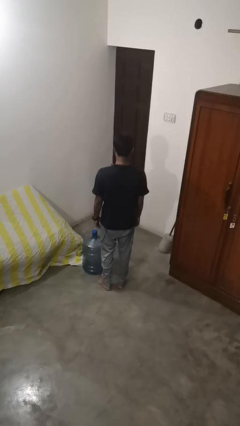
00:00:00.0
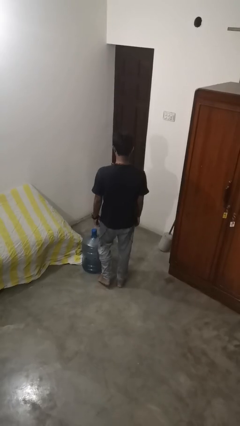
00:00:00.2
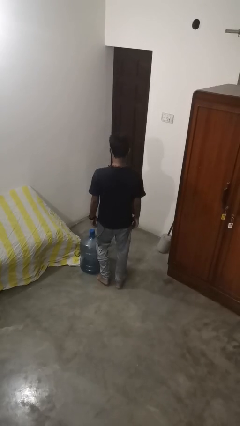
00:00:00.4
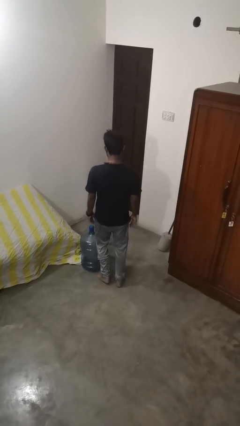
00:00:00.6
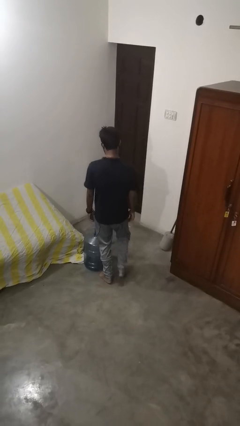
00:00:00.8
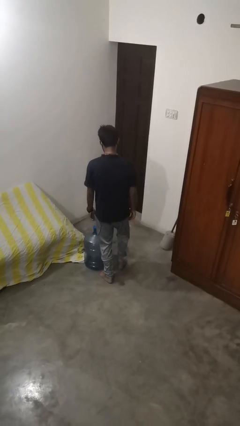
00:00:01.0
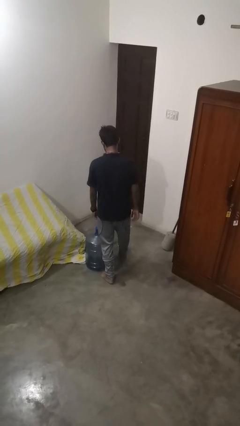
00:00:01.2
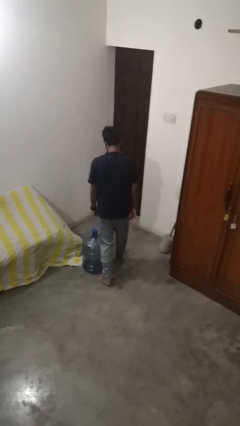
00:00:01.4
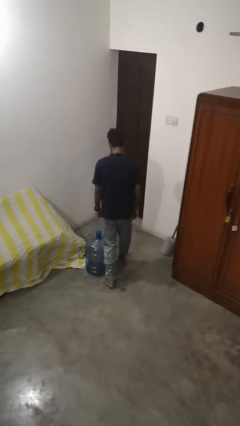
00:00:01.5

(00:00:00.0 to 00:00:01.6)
person trips on object on floor

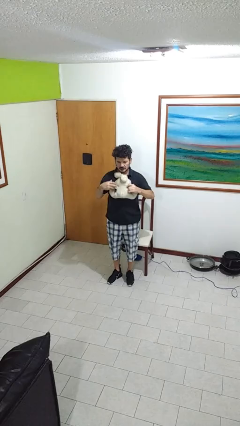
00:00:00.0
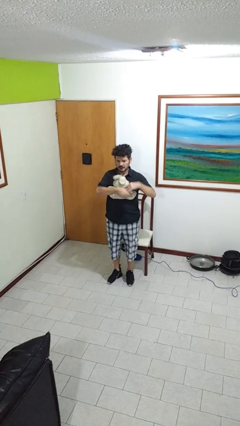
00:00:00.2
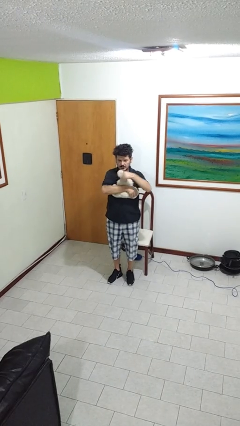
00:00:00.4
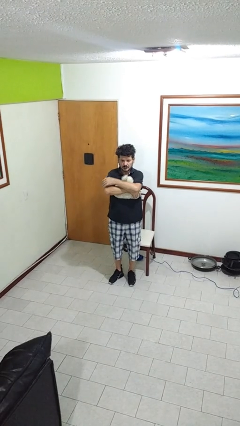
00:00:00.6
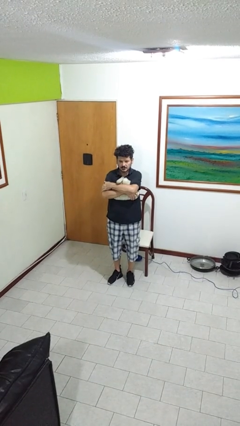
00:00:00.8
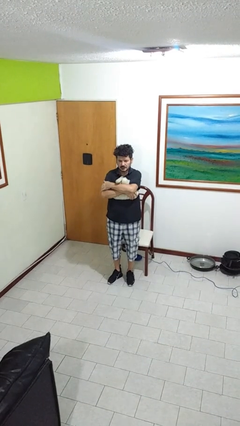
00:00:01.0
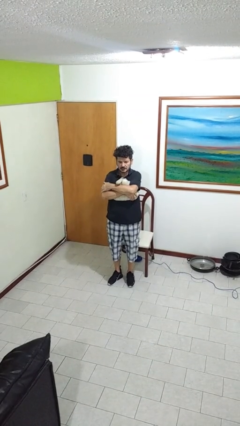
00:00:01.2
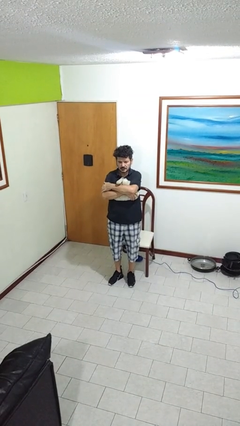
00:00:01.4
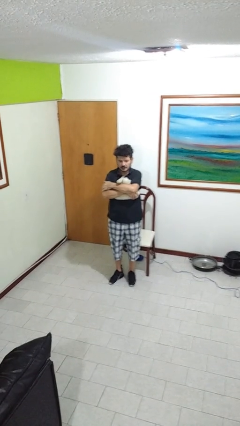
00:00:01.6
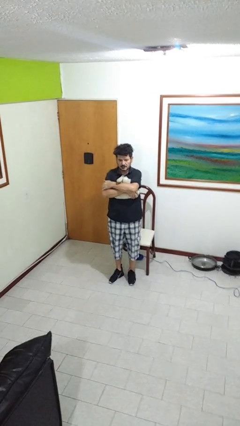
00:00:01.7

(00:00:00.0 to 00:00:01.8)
person hugs stuffed animal

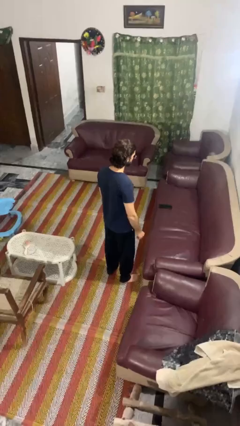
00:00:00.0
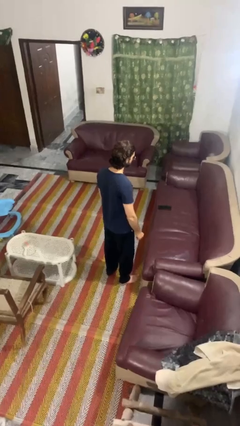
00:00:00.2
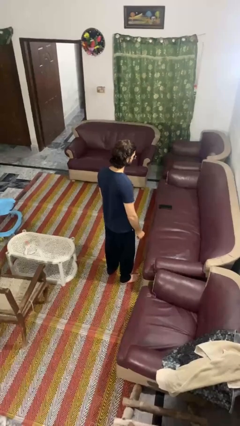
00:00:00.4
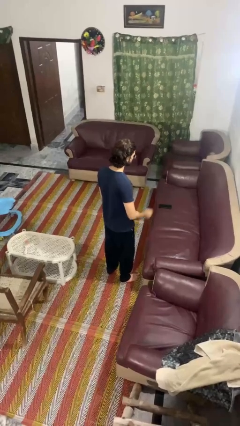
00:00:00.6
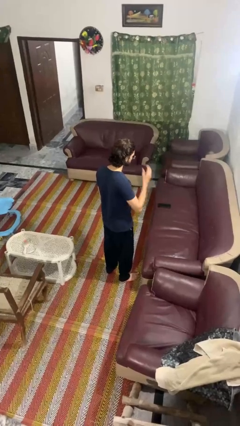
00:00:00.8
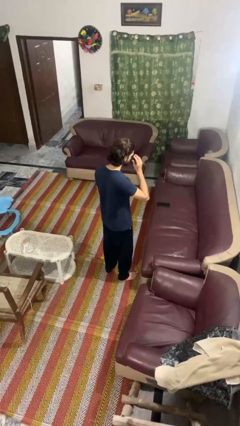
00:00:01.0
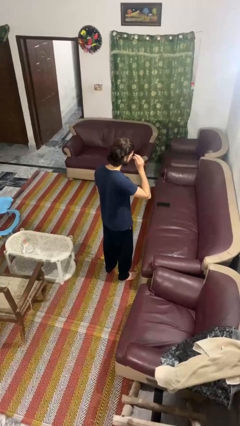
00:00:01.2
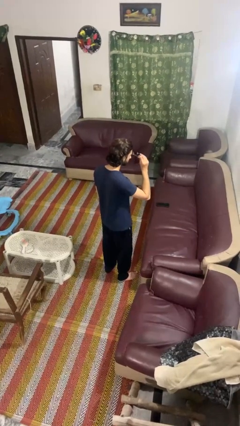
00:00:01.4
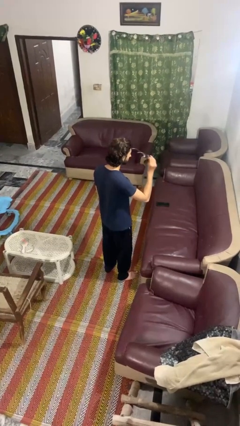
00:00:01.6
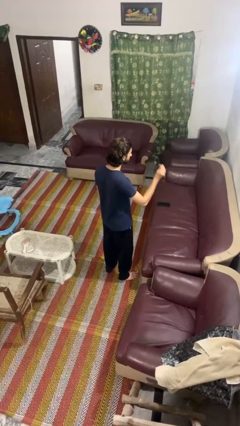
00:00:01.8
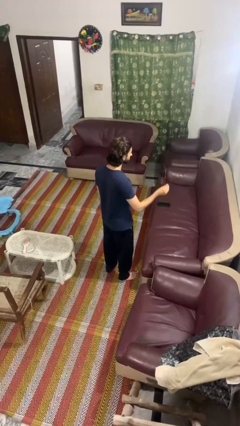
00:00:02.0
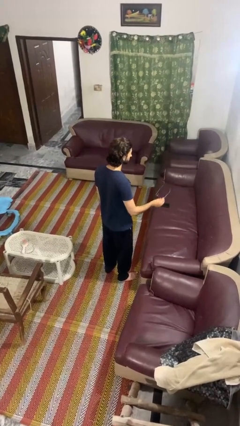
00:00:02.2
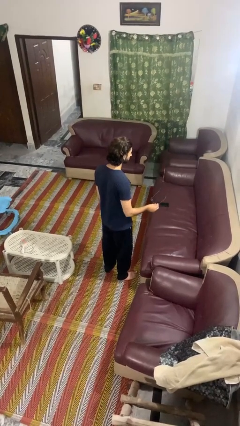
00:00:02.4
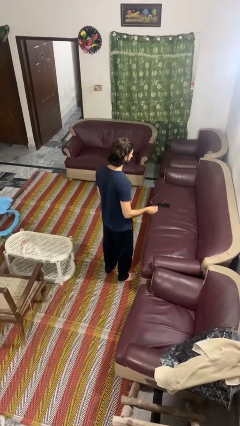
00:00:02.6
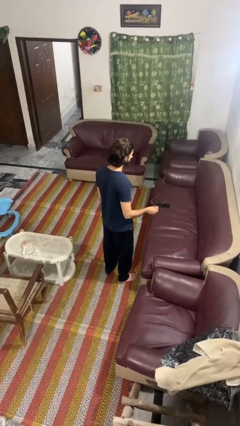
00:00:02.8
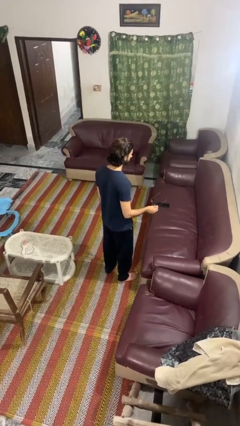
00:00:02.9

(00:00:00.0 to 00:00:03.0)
person takes off sunglasses

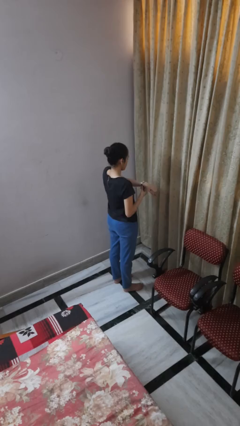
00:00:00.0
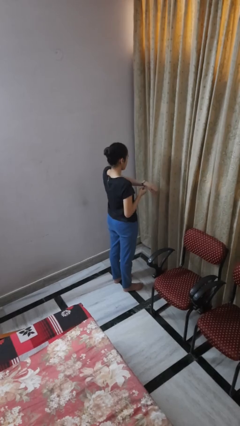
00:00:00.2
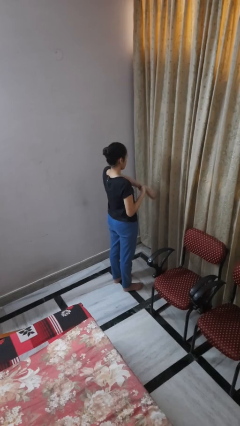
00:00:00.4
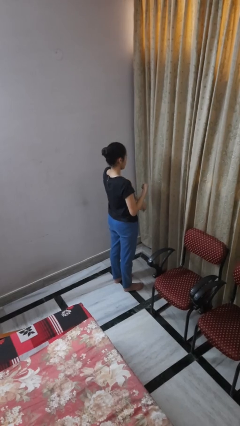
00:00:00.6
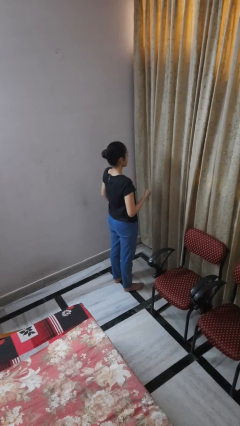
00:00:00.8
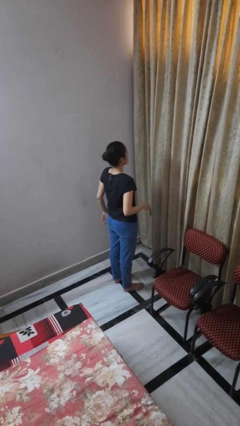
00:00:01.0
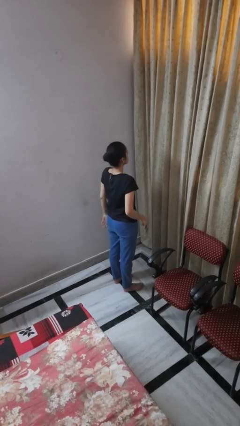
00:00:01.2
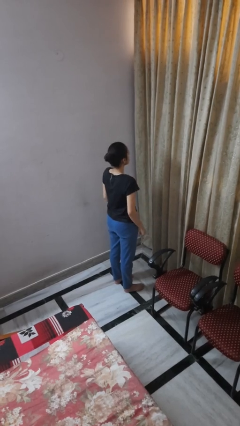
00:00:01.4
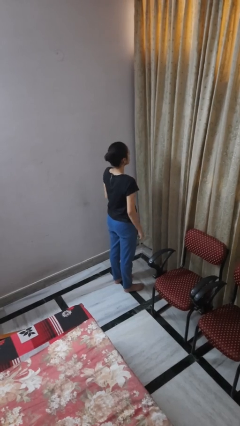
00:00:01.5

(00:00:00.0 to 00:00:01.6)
person takes off wristwatch

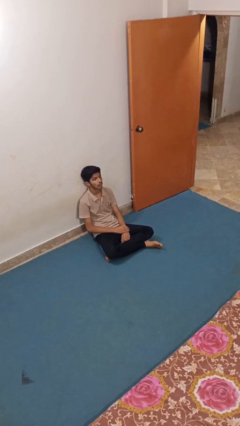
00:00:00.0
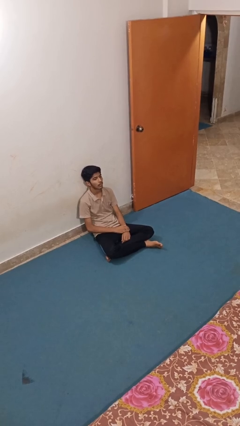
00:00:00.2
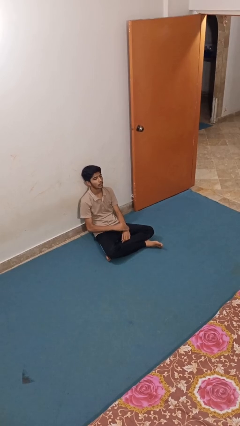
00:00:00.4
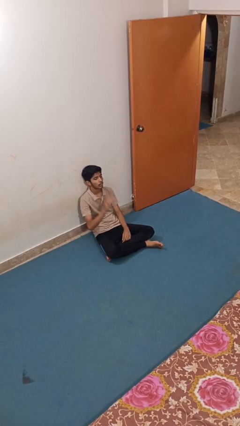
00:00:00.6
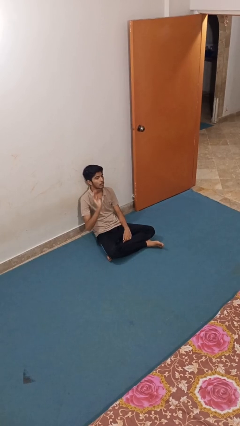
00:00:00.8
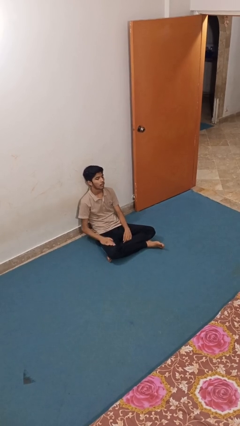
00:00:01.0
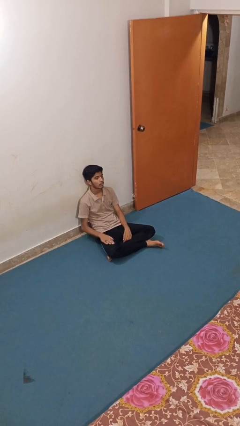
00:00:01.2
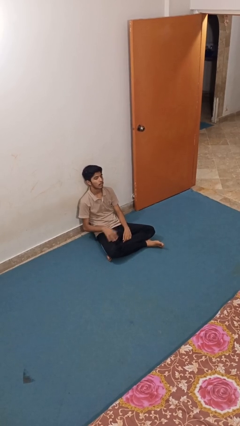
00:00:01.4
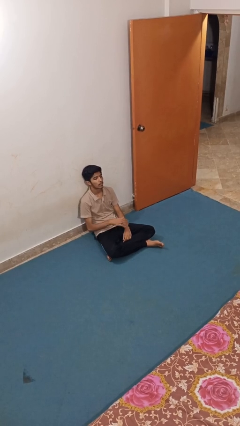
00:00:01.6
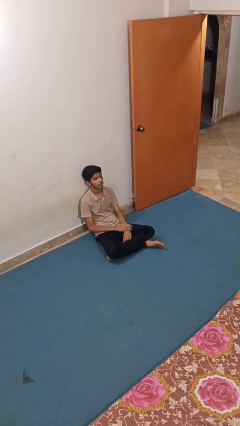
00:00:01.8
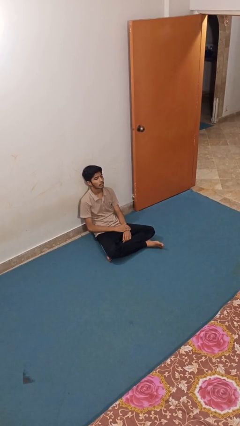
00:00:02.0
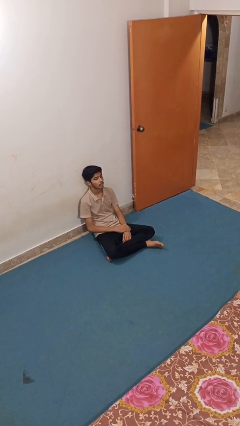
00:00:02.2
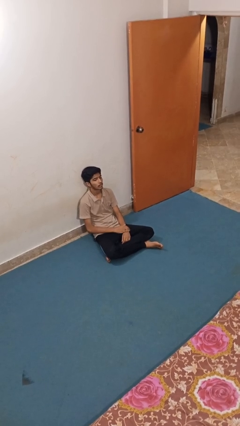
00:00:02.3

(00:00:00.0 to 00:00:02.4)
person slaps hands on thighs

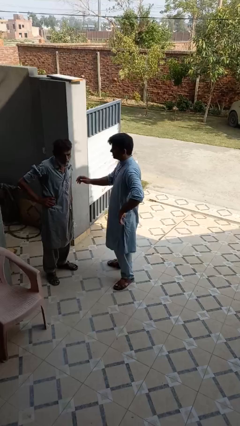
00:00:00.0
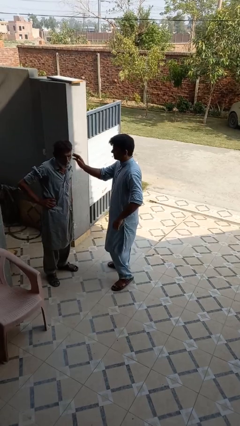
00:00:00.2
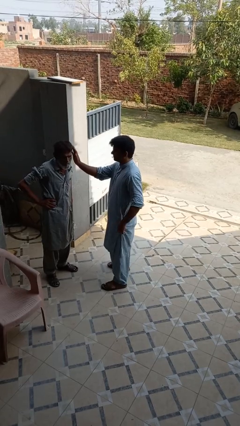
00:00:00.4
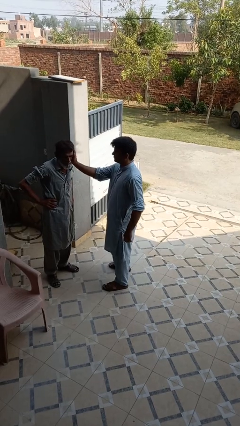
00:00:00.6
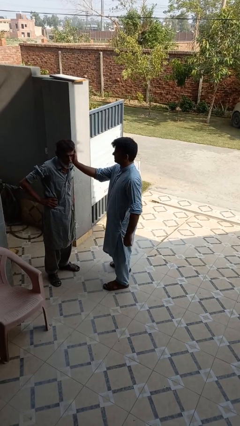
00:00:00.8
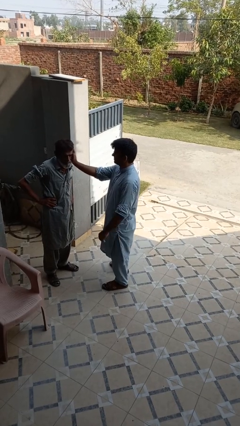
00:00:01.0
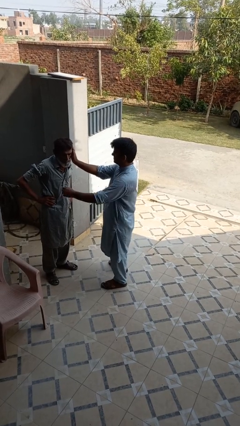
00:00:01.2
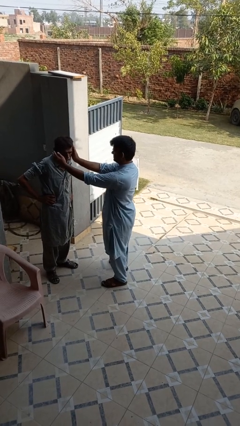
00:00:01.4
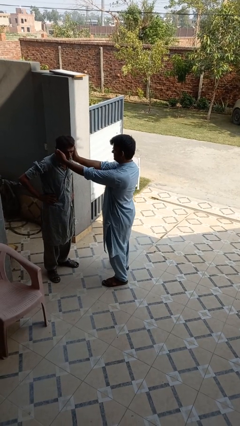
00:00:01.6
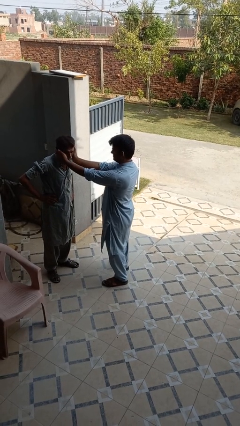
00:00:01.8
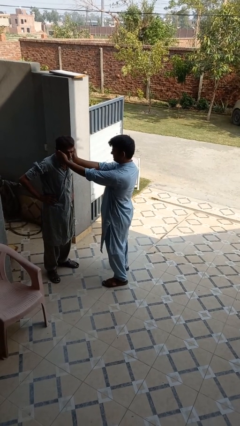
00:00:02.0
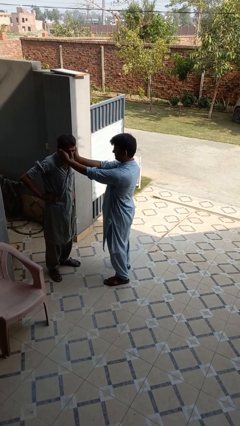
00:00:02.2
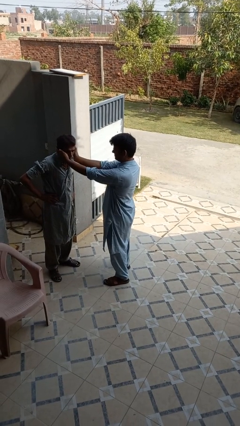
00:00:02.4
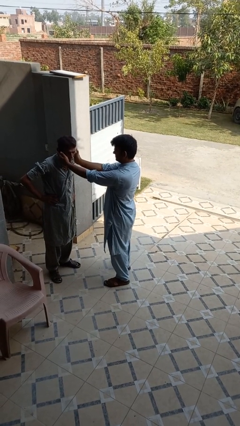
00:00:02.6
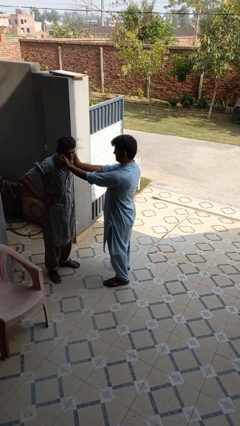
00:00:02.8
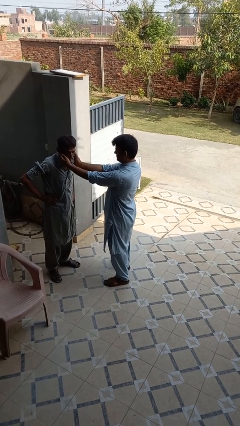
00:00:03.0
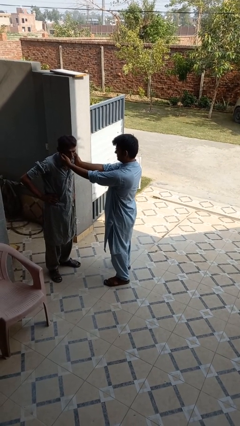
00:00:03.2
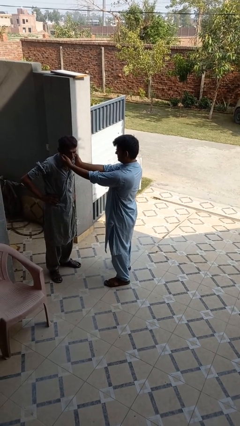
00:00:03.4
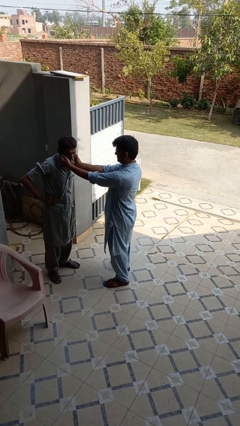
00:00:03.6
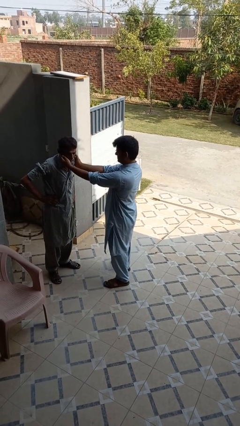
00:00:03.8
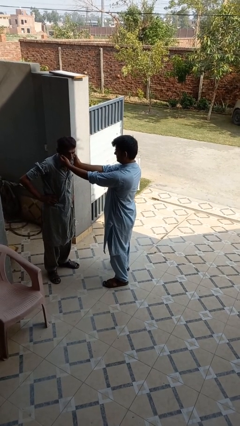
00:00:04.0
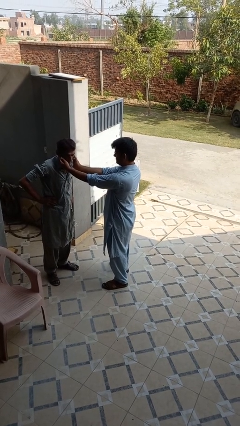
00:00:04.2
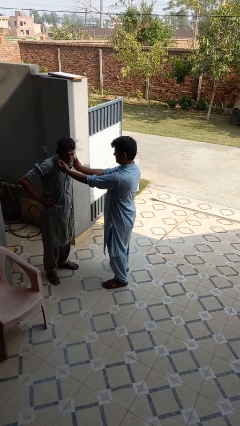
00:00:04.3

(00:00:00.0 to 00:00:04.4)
person touches face of person

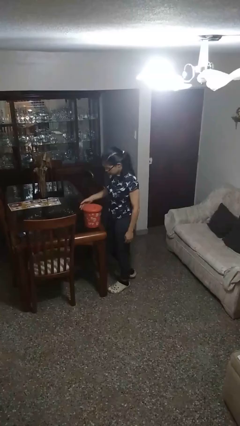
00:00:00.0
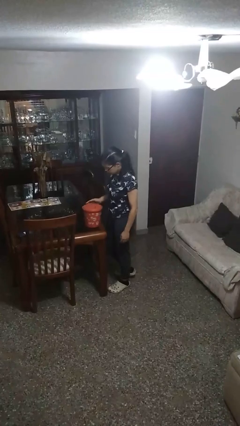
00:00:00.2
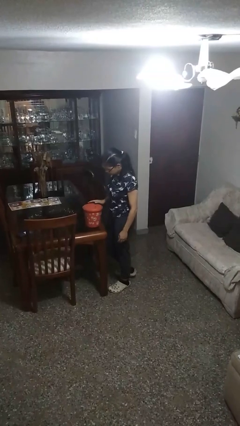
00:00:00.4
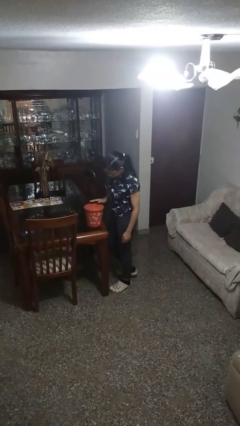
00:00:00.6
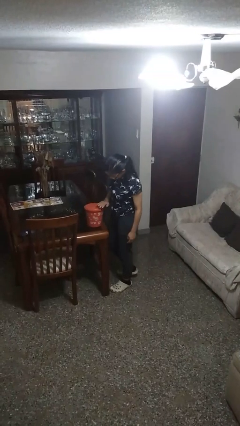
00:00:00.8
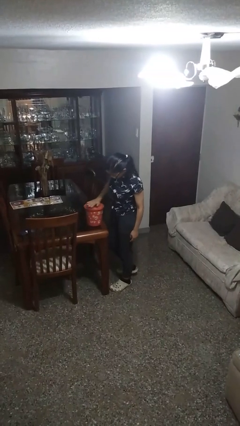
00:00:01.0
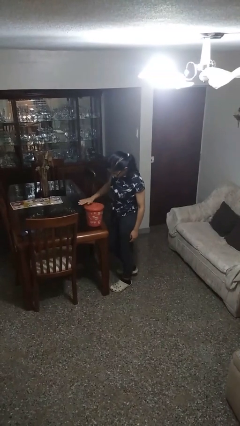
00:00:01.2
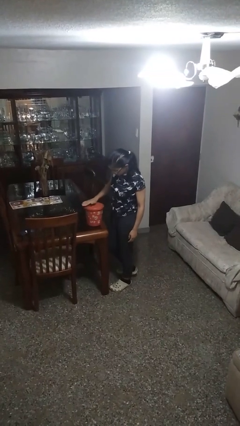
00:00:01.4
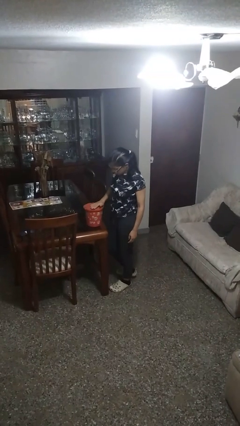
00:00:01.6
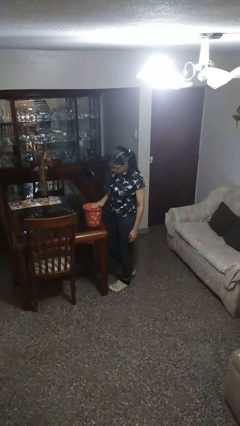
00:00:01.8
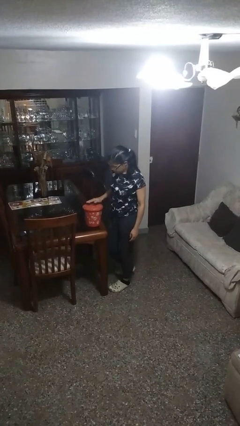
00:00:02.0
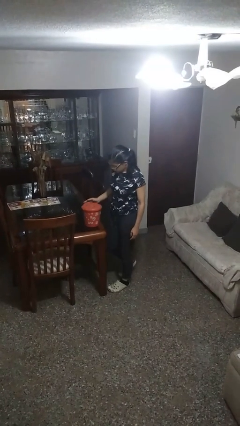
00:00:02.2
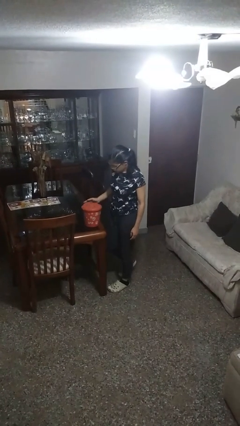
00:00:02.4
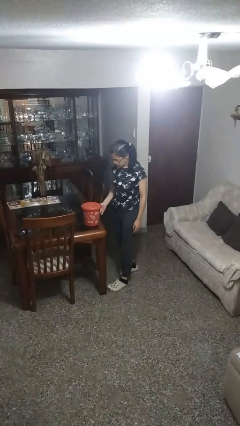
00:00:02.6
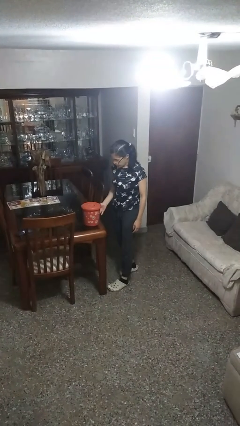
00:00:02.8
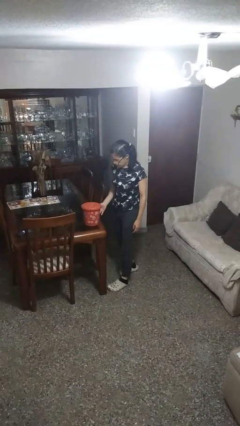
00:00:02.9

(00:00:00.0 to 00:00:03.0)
person waves hand over object
